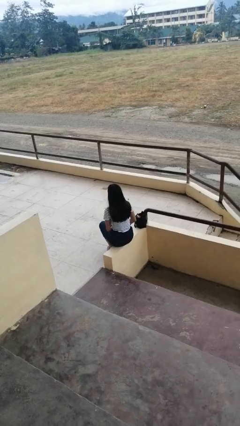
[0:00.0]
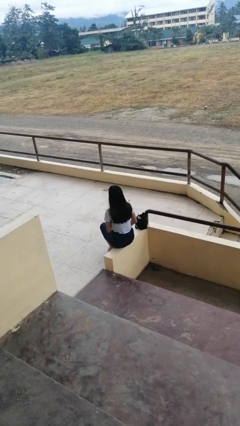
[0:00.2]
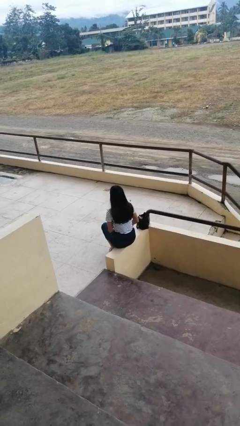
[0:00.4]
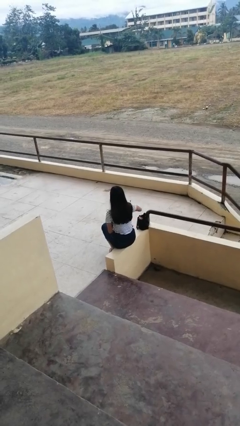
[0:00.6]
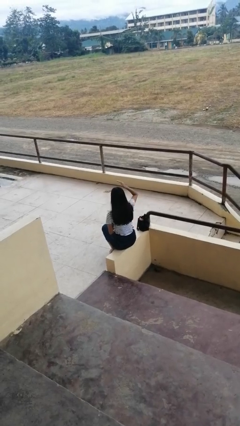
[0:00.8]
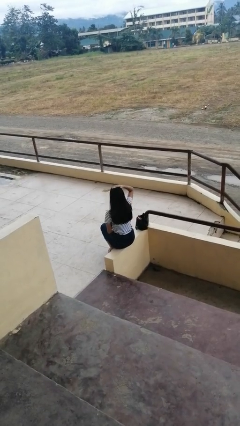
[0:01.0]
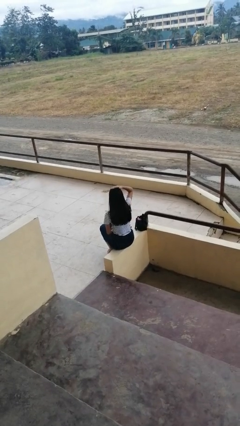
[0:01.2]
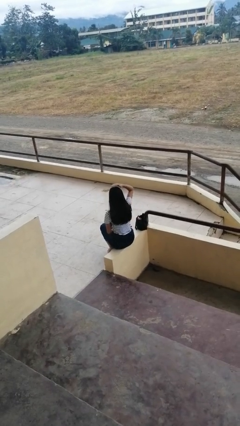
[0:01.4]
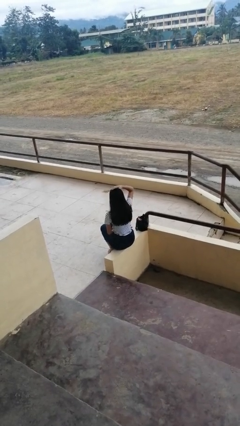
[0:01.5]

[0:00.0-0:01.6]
person pats head

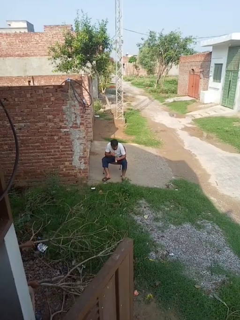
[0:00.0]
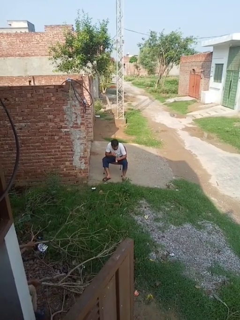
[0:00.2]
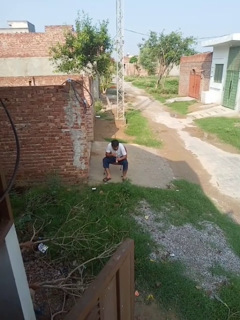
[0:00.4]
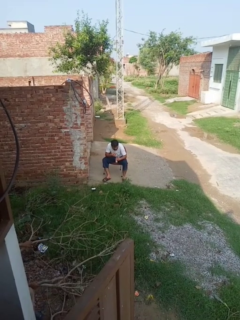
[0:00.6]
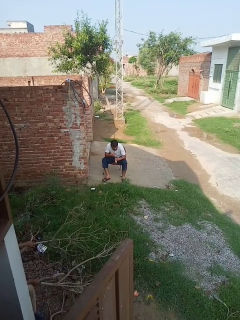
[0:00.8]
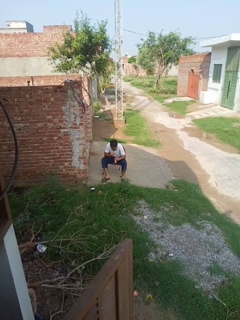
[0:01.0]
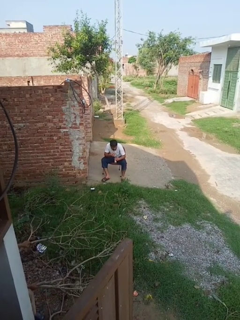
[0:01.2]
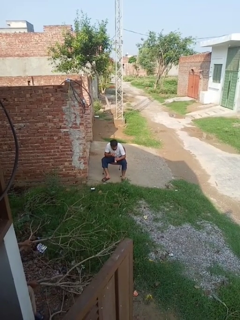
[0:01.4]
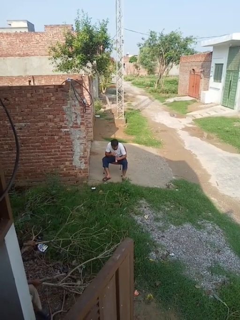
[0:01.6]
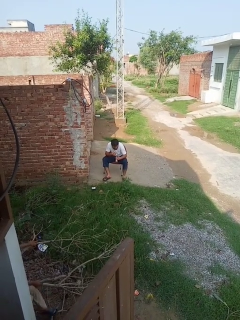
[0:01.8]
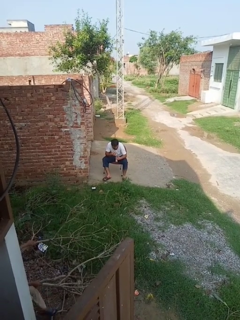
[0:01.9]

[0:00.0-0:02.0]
person drinks from straw

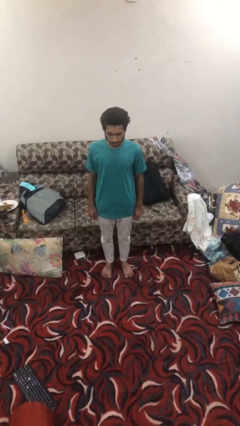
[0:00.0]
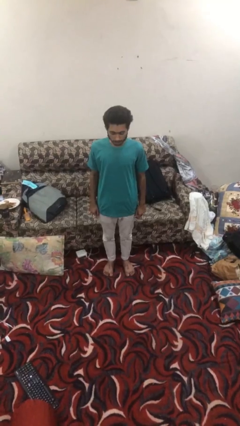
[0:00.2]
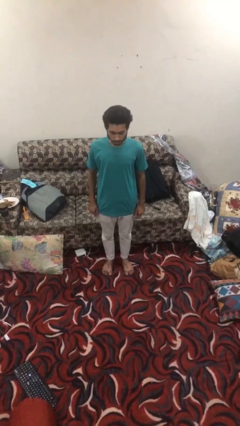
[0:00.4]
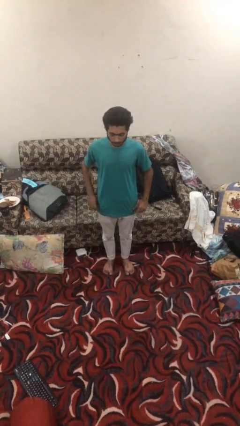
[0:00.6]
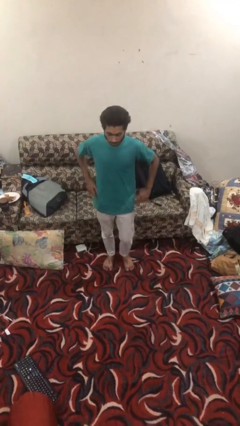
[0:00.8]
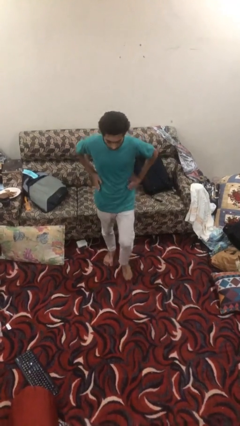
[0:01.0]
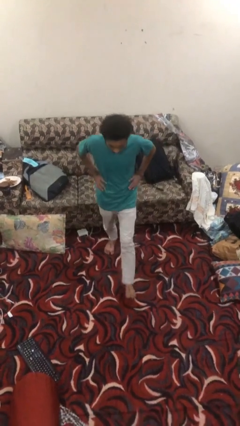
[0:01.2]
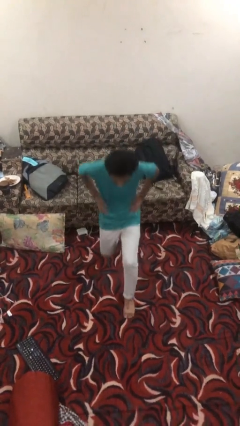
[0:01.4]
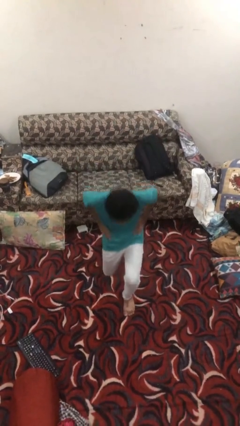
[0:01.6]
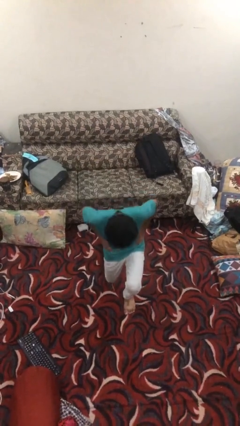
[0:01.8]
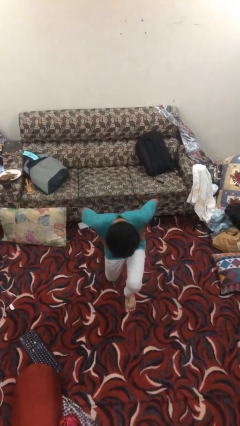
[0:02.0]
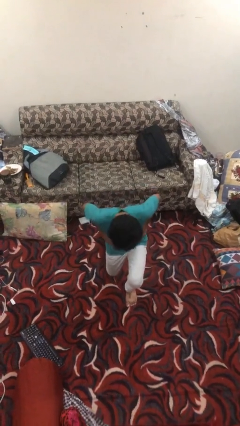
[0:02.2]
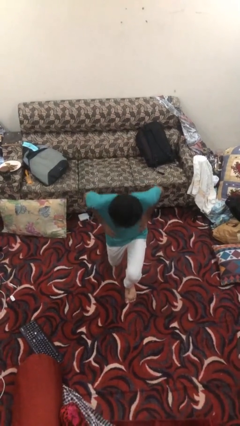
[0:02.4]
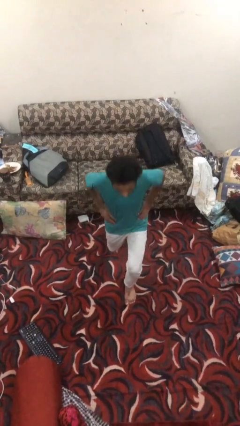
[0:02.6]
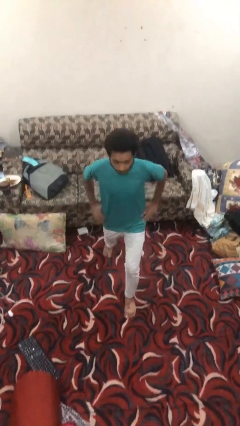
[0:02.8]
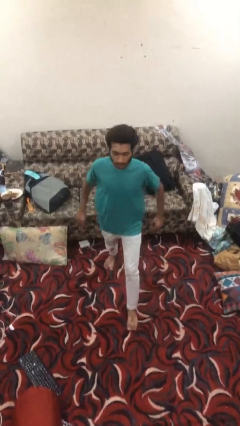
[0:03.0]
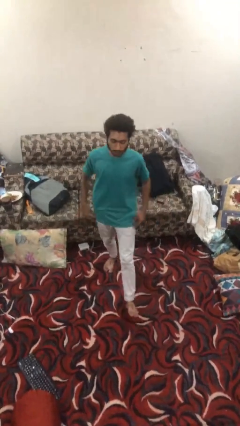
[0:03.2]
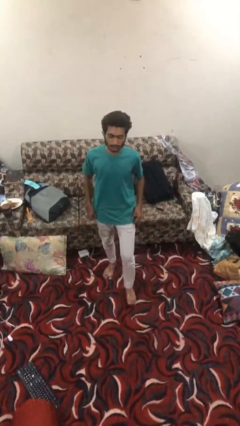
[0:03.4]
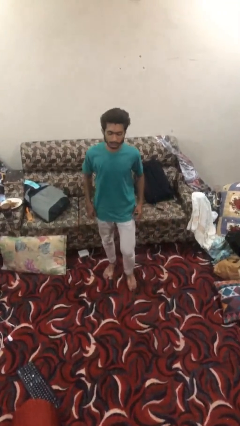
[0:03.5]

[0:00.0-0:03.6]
person exercises with lunges

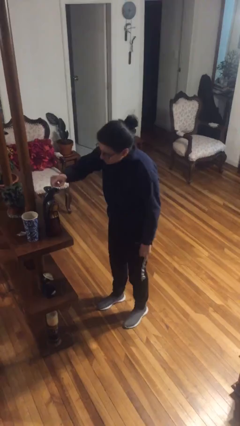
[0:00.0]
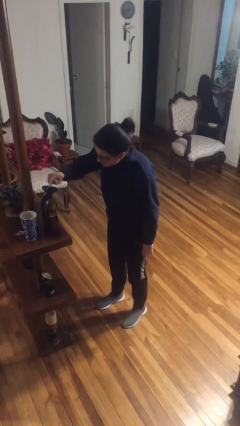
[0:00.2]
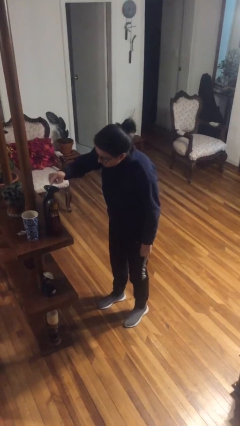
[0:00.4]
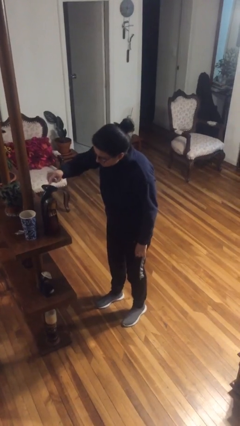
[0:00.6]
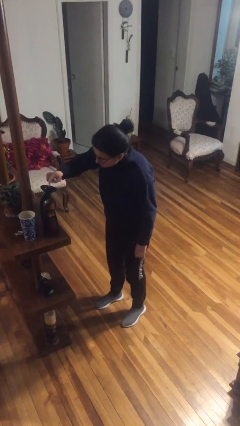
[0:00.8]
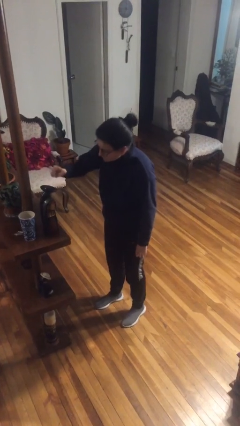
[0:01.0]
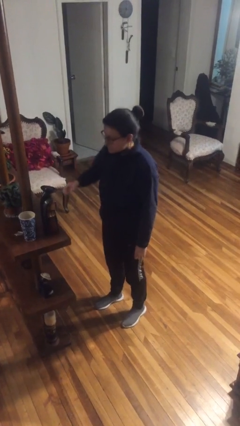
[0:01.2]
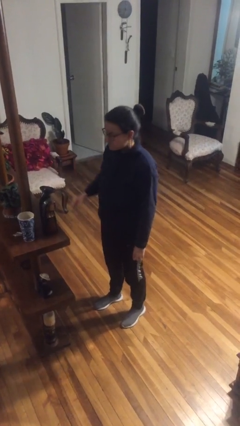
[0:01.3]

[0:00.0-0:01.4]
person taps object with finger

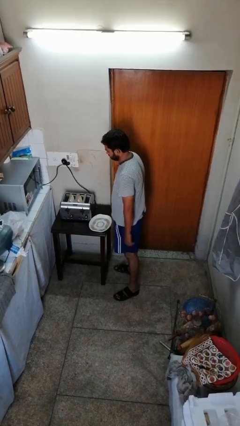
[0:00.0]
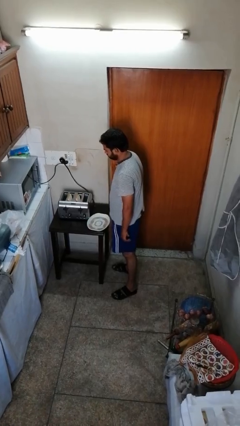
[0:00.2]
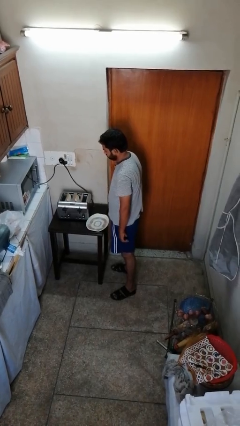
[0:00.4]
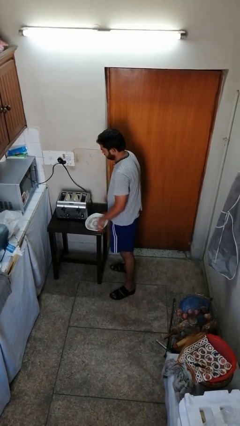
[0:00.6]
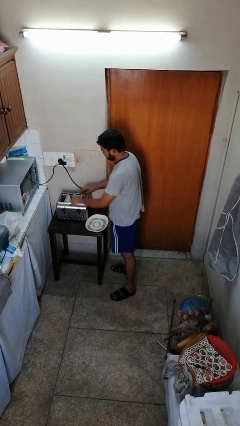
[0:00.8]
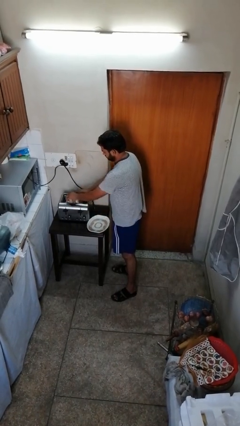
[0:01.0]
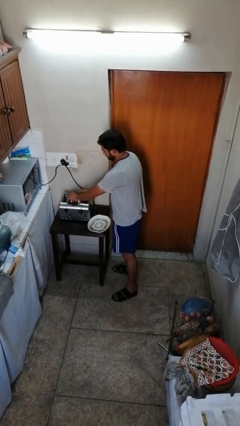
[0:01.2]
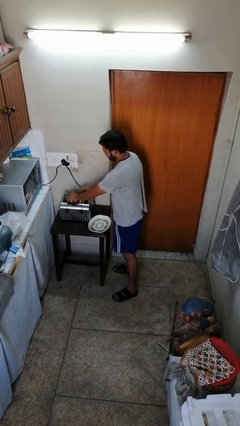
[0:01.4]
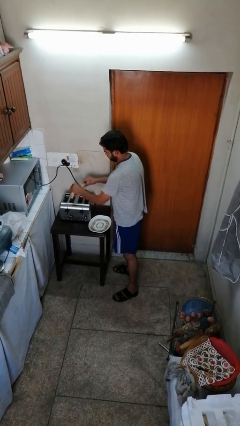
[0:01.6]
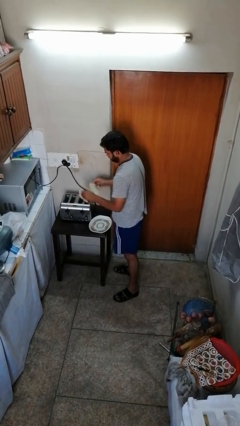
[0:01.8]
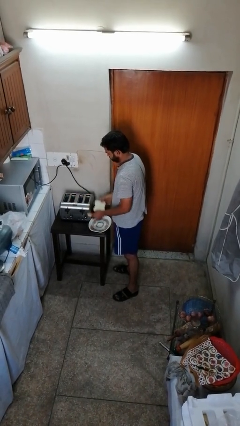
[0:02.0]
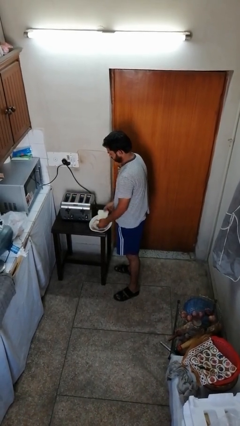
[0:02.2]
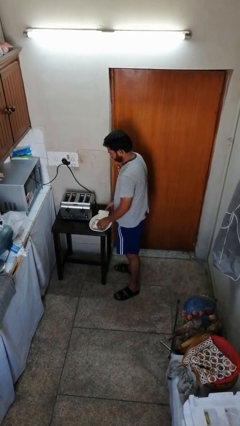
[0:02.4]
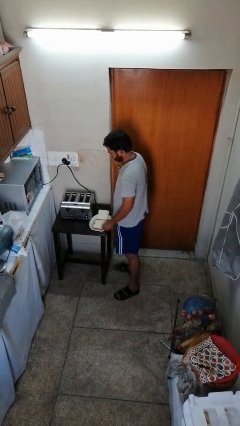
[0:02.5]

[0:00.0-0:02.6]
person takes object from toaster

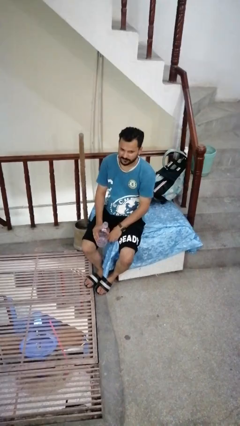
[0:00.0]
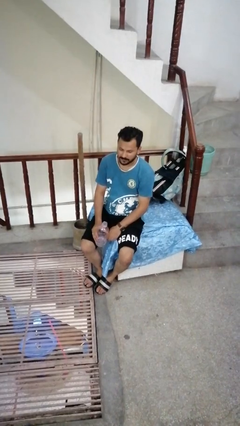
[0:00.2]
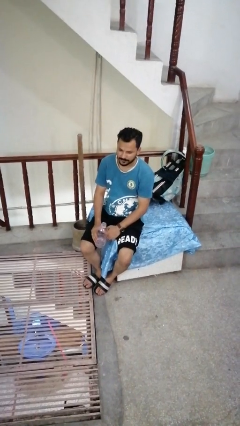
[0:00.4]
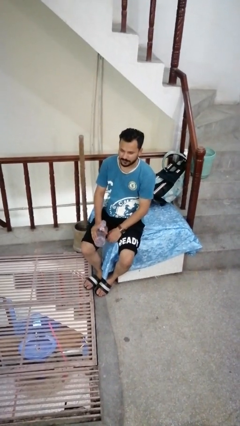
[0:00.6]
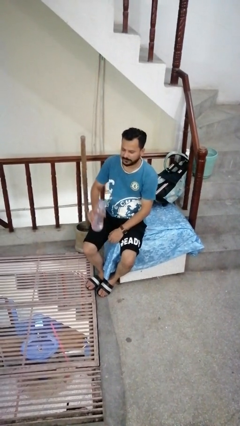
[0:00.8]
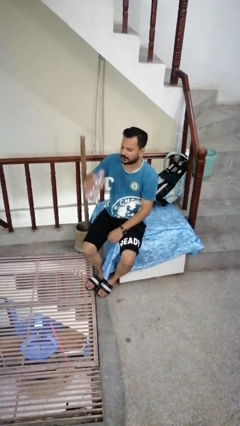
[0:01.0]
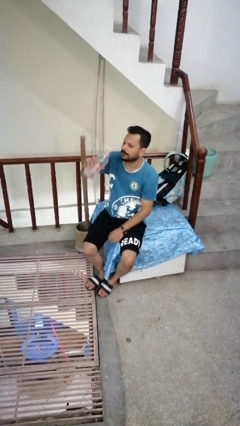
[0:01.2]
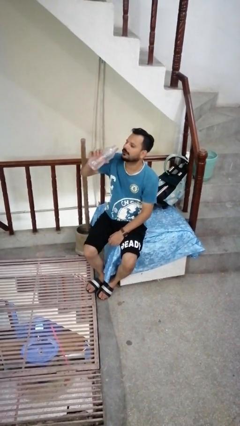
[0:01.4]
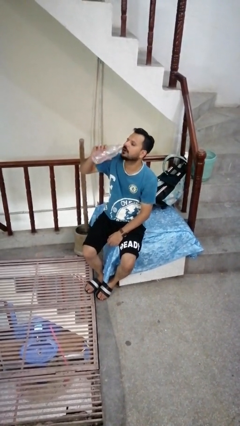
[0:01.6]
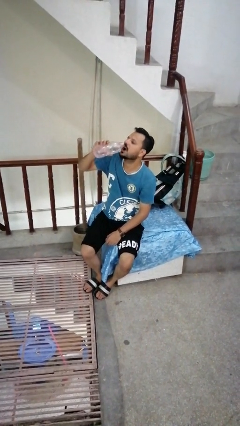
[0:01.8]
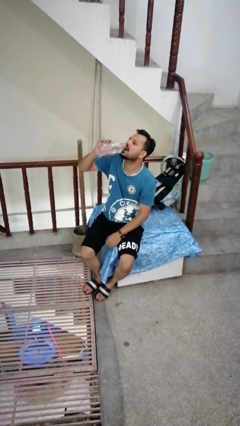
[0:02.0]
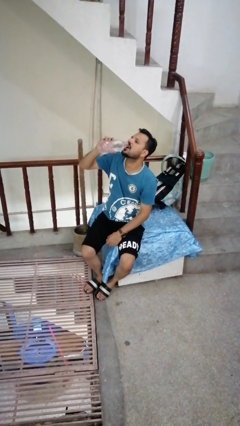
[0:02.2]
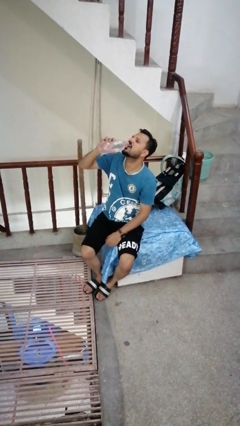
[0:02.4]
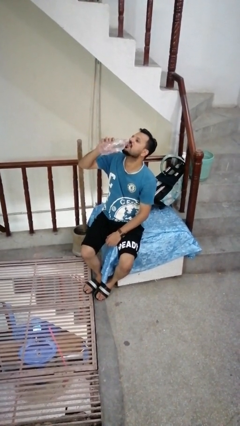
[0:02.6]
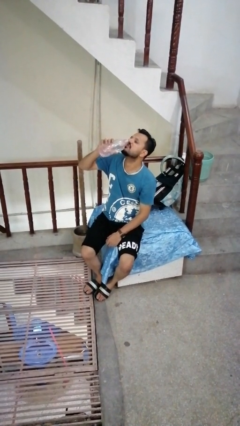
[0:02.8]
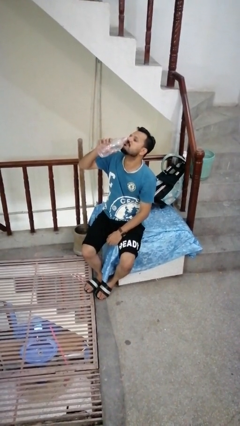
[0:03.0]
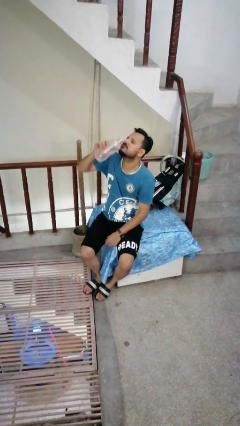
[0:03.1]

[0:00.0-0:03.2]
person drinks from bottle

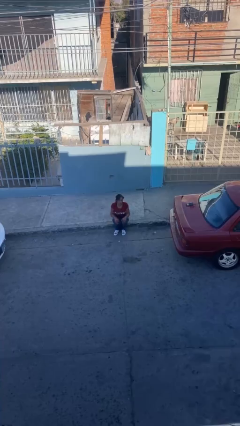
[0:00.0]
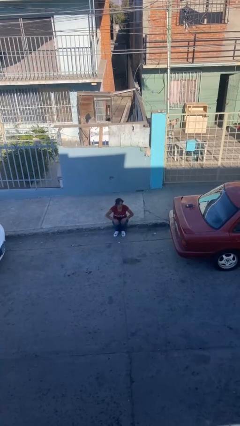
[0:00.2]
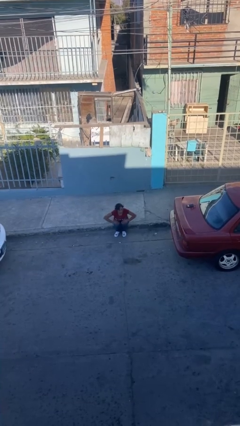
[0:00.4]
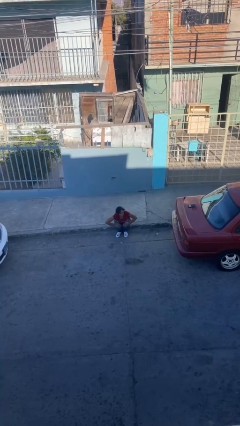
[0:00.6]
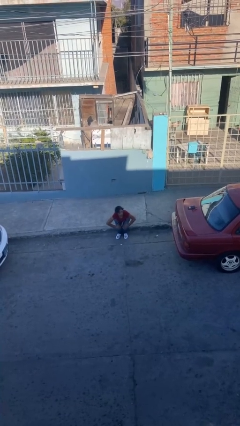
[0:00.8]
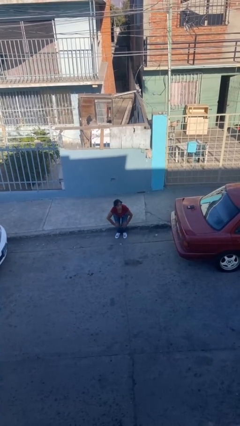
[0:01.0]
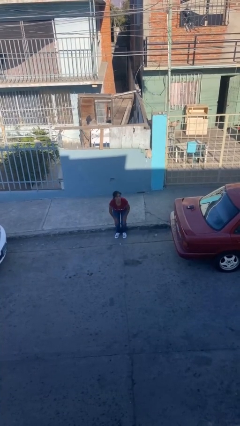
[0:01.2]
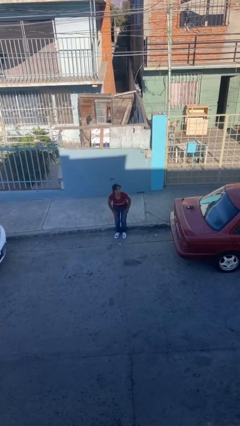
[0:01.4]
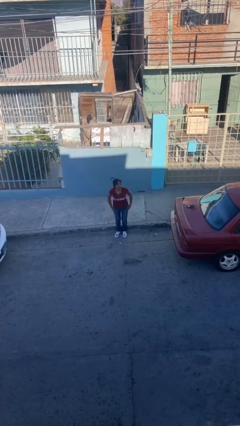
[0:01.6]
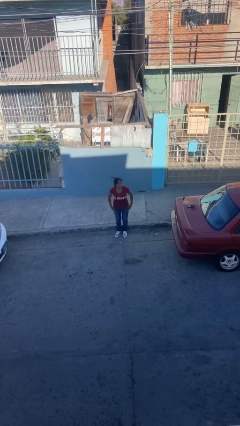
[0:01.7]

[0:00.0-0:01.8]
person stands up

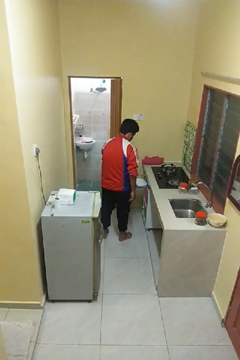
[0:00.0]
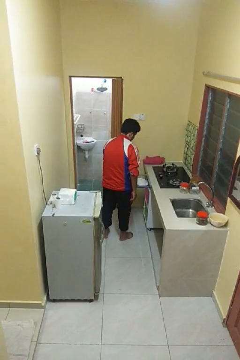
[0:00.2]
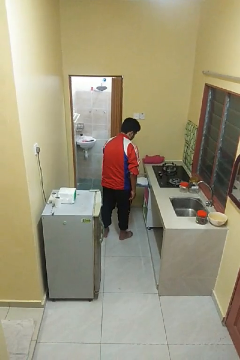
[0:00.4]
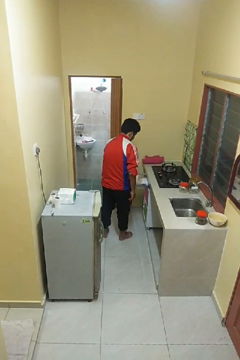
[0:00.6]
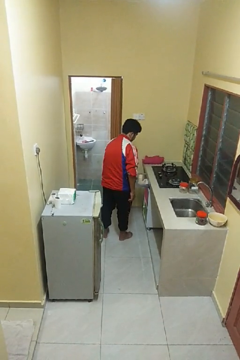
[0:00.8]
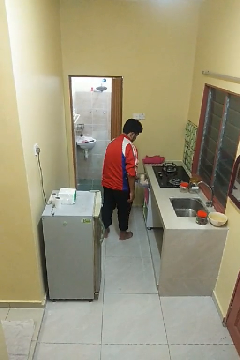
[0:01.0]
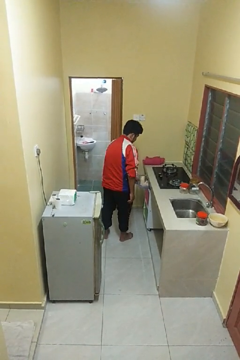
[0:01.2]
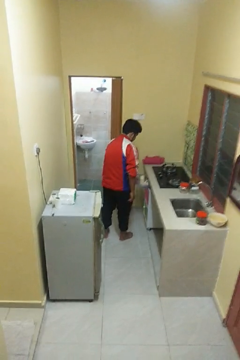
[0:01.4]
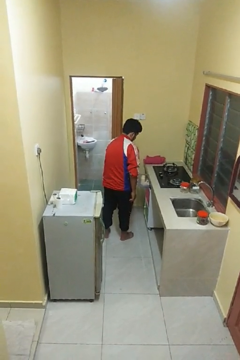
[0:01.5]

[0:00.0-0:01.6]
person closes kitchen drawer
